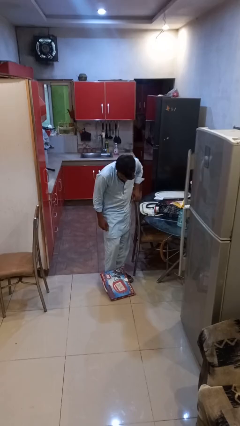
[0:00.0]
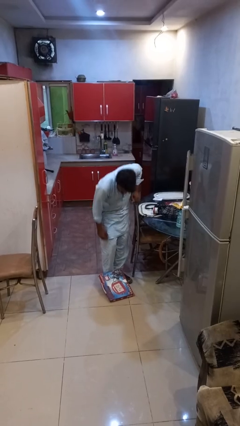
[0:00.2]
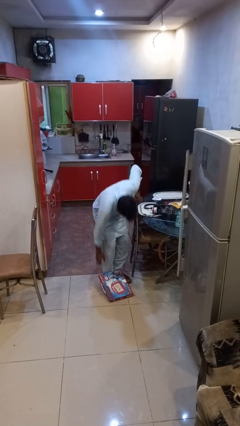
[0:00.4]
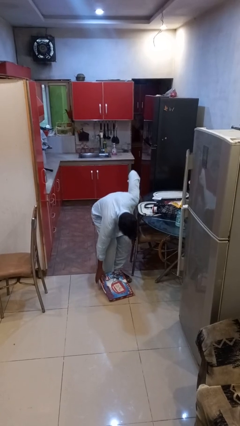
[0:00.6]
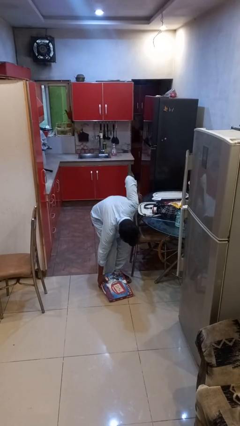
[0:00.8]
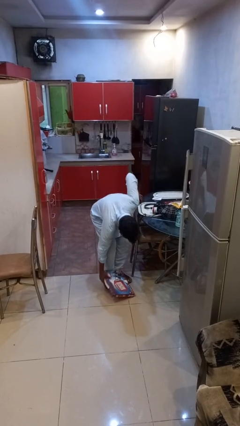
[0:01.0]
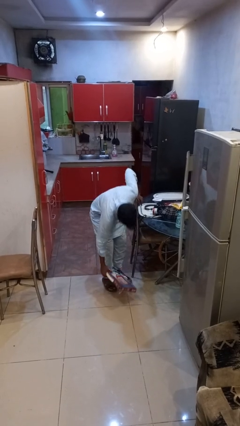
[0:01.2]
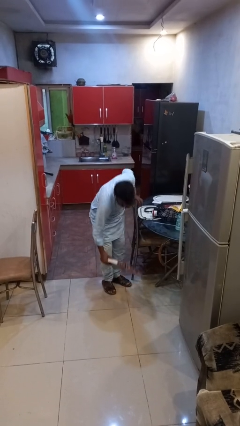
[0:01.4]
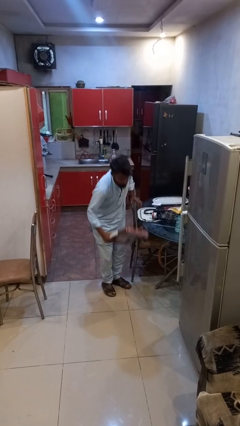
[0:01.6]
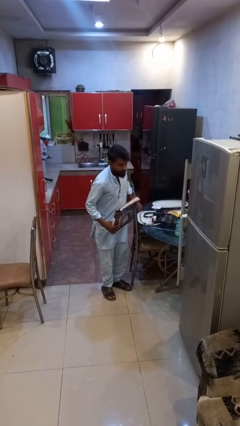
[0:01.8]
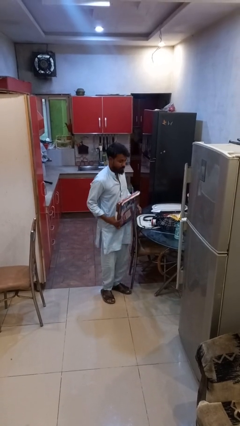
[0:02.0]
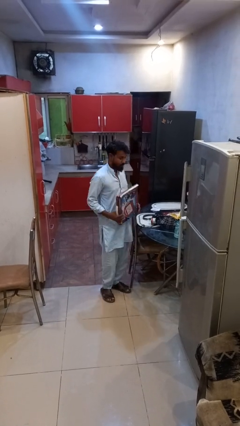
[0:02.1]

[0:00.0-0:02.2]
person picks up object from floor

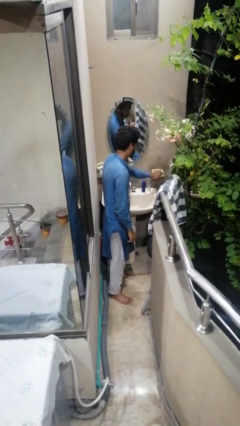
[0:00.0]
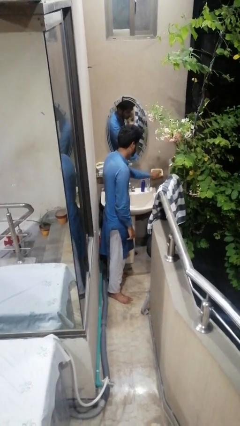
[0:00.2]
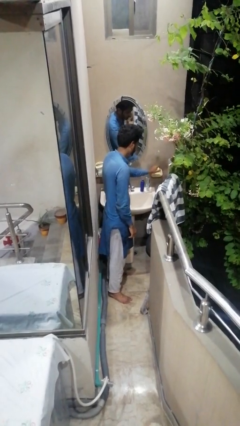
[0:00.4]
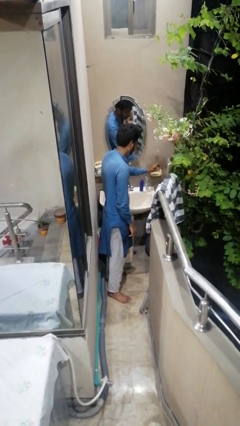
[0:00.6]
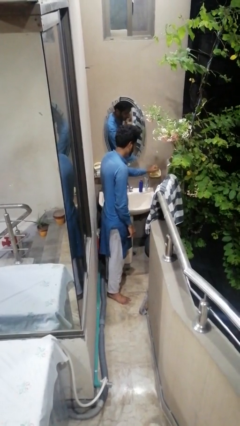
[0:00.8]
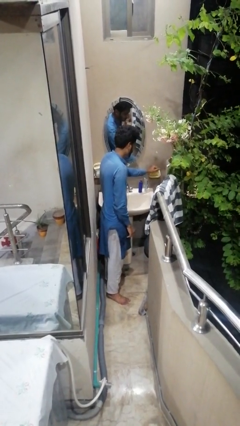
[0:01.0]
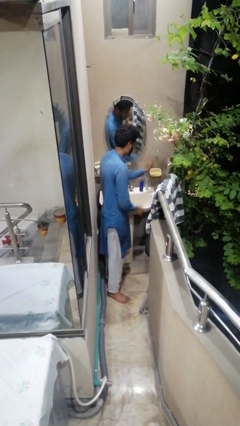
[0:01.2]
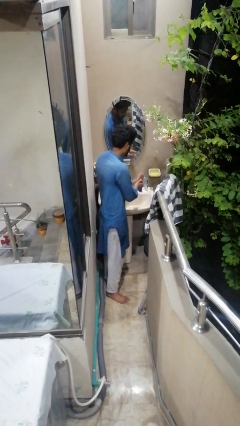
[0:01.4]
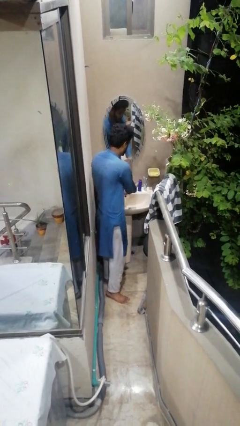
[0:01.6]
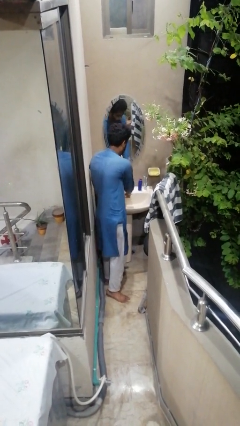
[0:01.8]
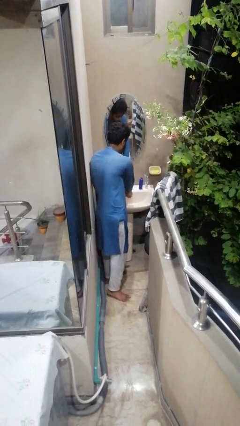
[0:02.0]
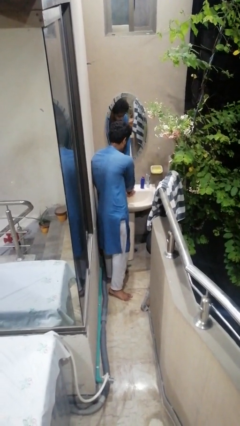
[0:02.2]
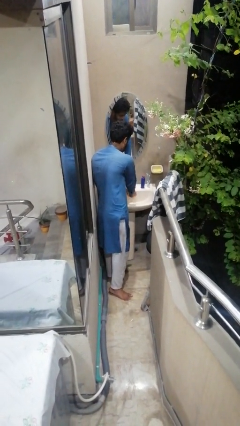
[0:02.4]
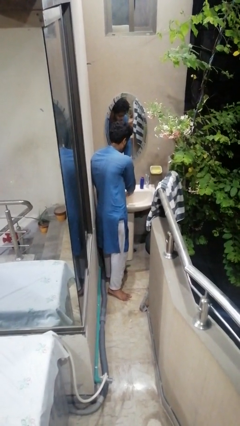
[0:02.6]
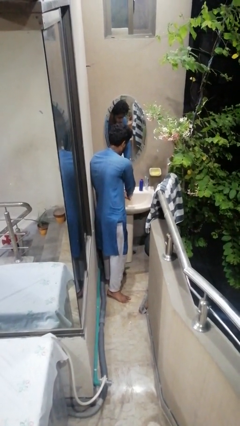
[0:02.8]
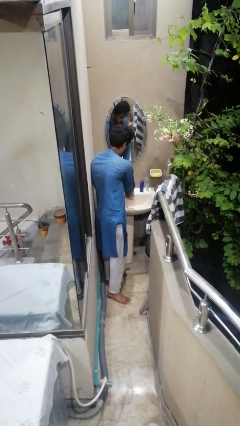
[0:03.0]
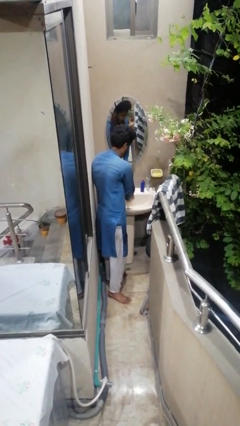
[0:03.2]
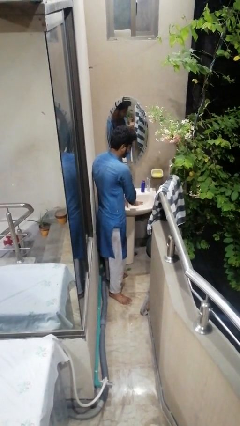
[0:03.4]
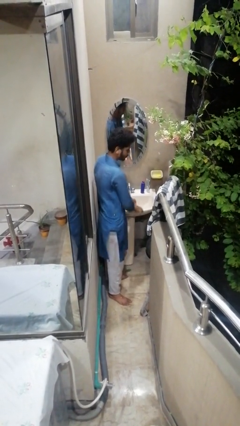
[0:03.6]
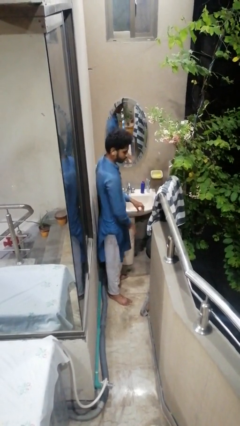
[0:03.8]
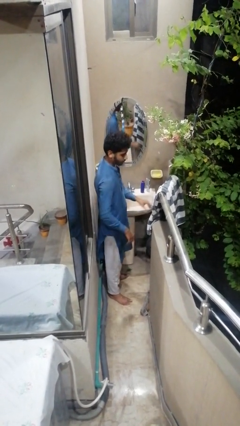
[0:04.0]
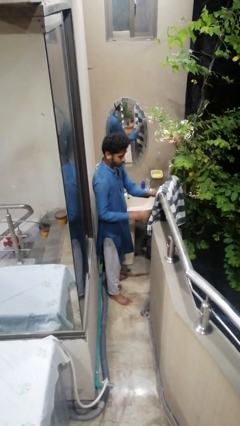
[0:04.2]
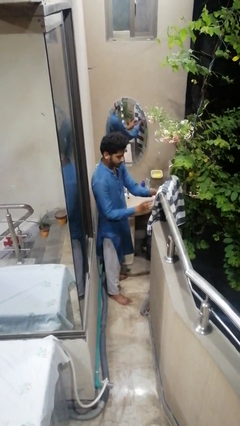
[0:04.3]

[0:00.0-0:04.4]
person washes hands

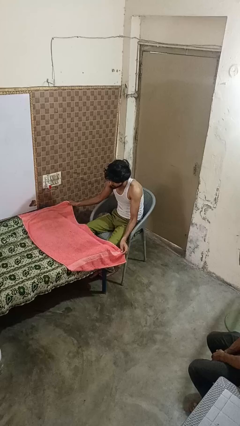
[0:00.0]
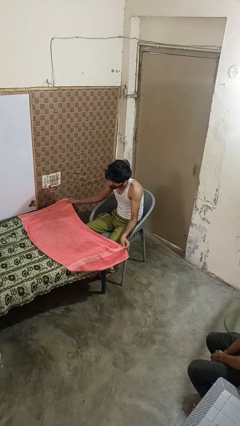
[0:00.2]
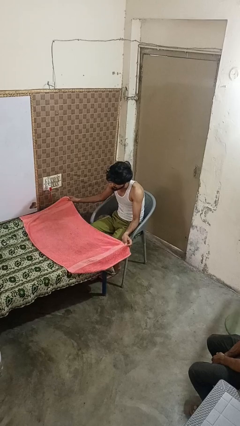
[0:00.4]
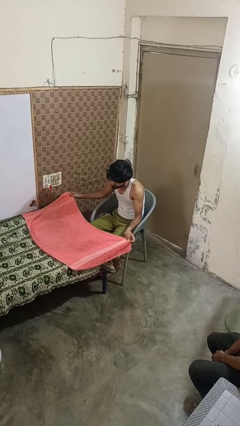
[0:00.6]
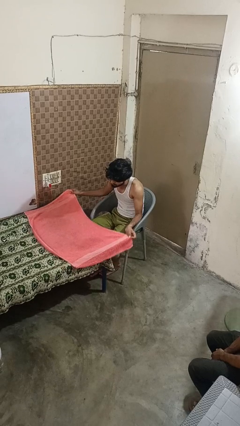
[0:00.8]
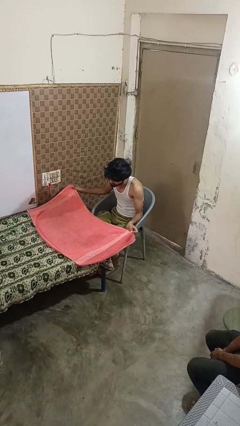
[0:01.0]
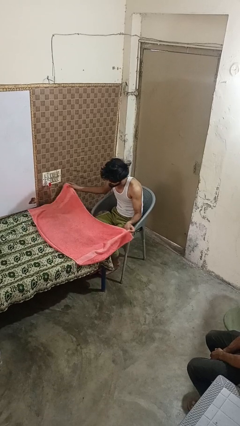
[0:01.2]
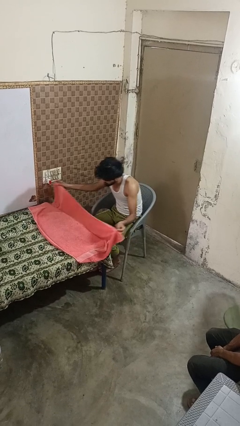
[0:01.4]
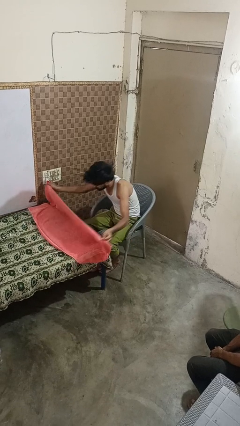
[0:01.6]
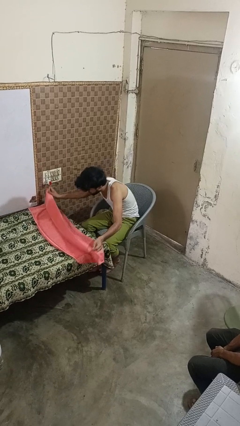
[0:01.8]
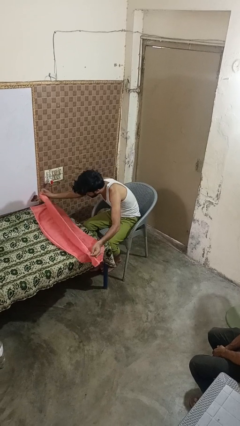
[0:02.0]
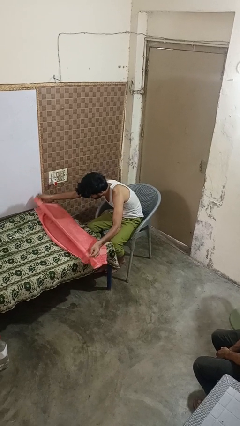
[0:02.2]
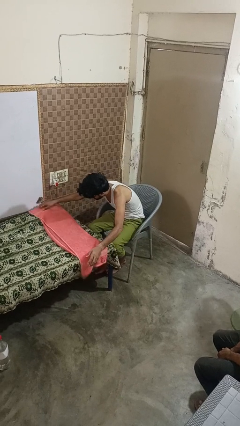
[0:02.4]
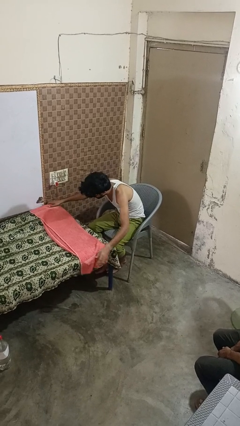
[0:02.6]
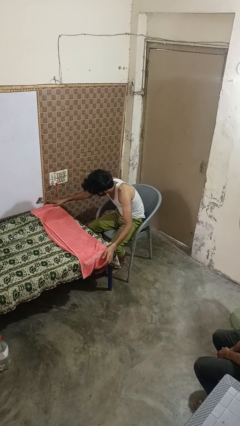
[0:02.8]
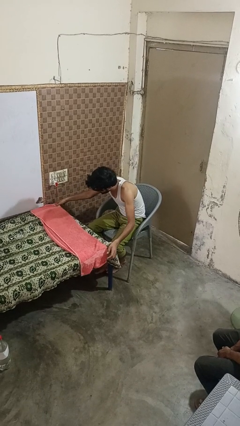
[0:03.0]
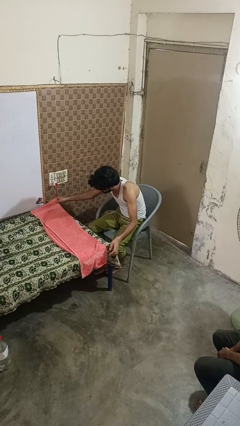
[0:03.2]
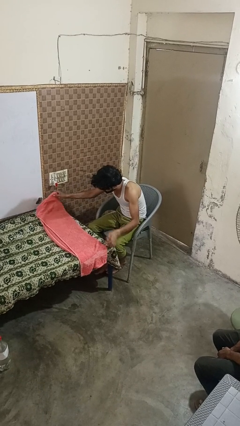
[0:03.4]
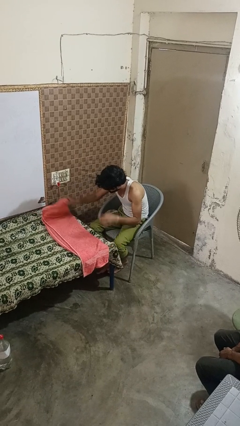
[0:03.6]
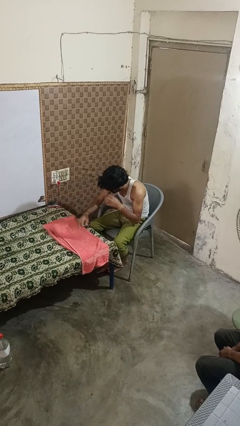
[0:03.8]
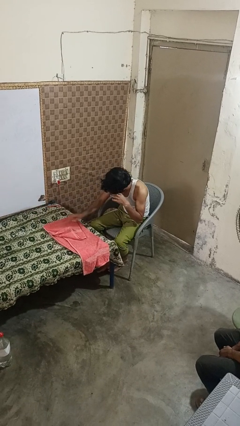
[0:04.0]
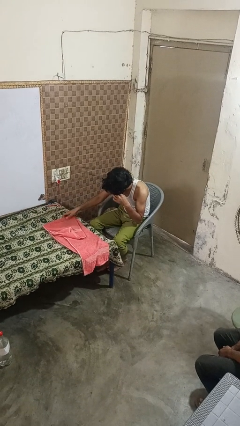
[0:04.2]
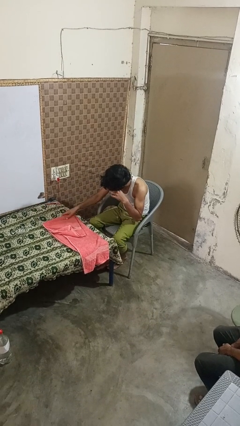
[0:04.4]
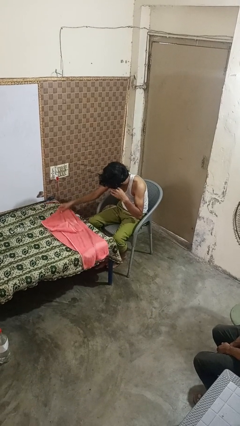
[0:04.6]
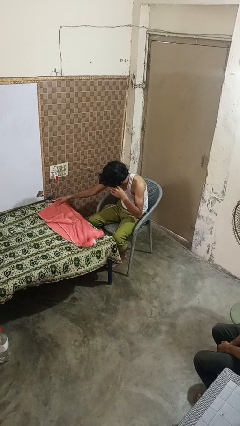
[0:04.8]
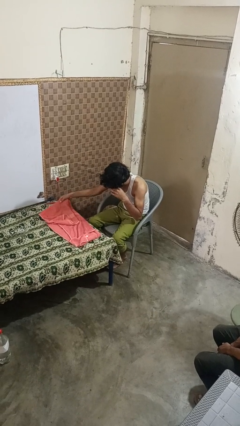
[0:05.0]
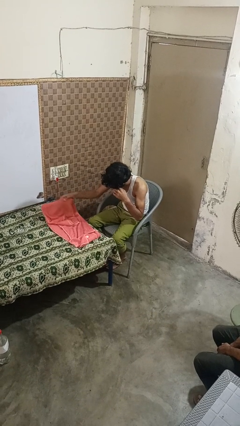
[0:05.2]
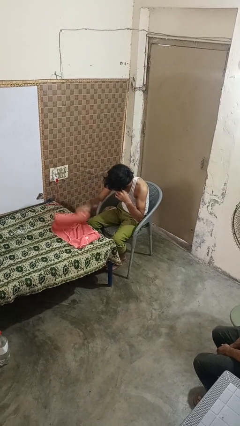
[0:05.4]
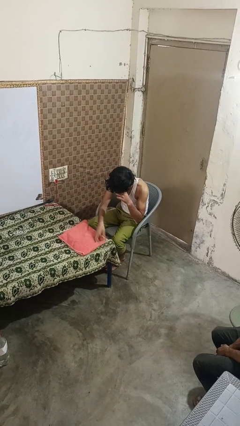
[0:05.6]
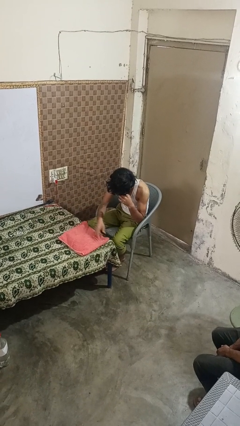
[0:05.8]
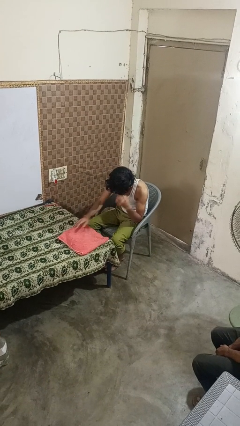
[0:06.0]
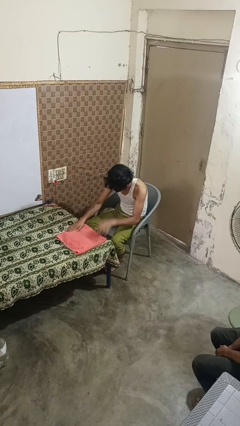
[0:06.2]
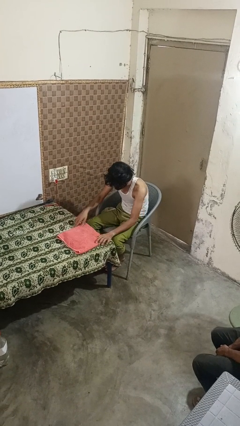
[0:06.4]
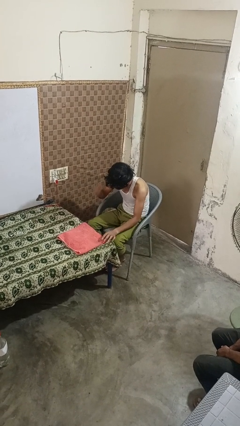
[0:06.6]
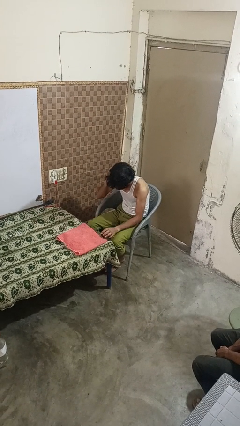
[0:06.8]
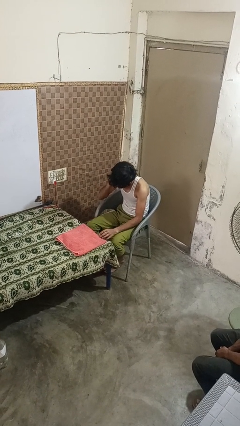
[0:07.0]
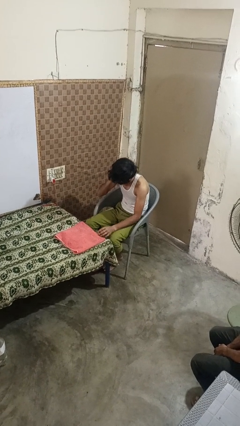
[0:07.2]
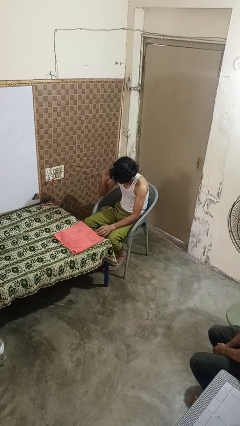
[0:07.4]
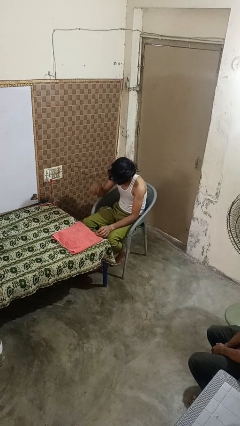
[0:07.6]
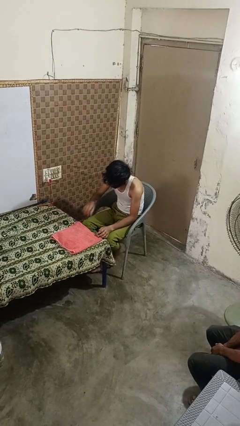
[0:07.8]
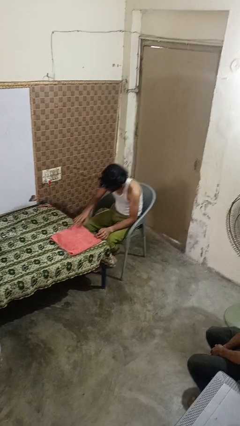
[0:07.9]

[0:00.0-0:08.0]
person folds towel

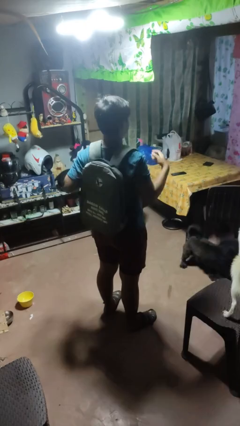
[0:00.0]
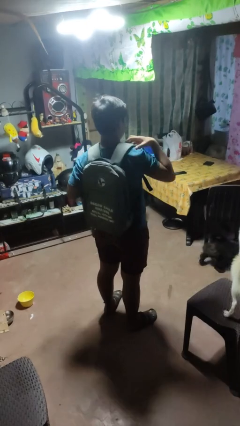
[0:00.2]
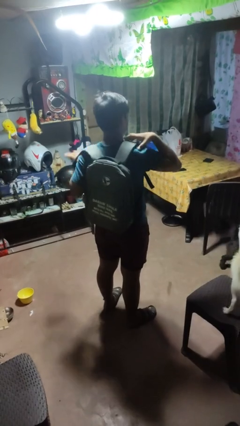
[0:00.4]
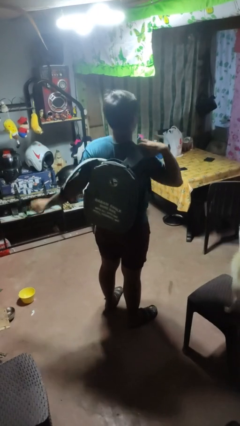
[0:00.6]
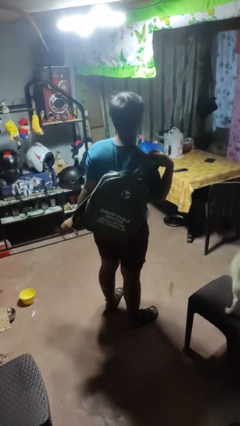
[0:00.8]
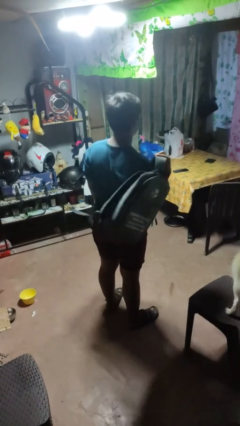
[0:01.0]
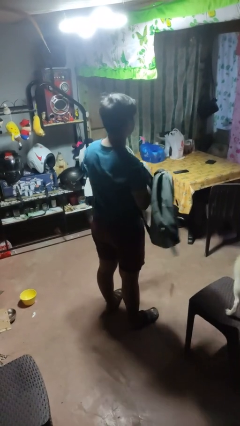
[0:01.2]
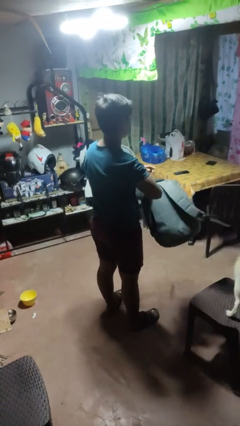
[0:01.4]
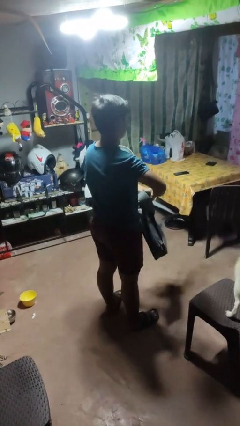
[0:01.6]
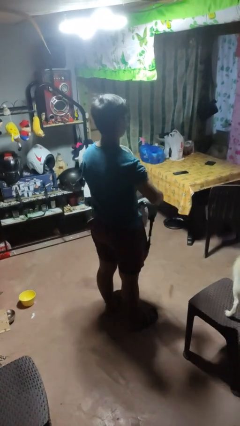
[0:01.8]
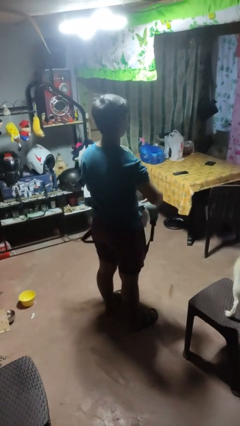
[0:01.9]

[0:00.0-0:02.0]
person takes off backpack

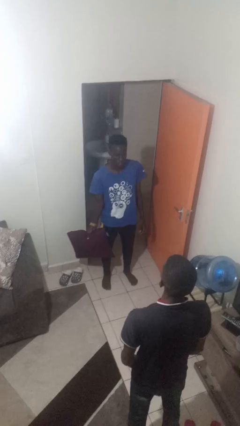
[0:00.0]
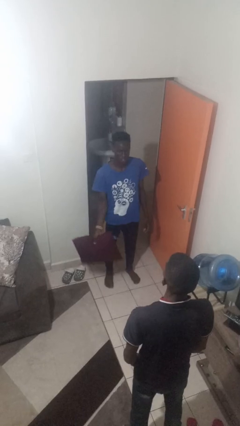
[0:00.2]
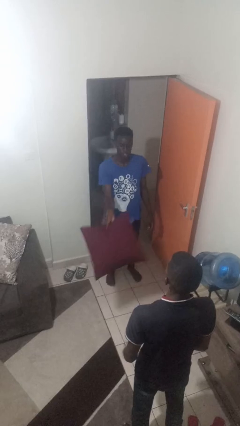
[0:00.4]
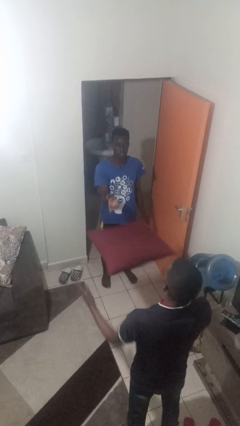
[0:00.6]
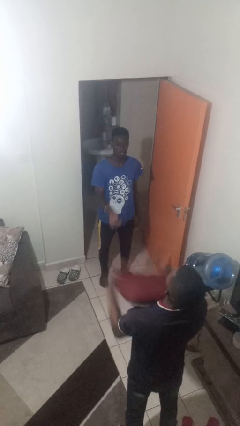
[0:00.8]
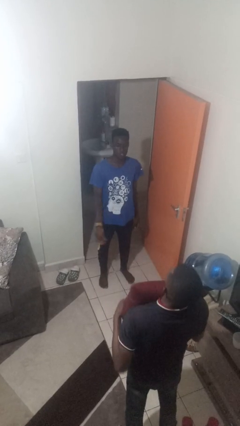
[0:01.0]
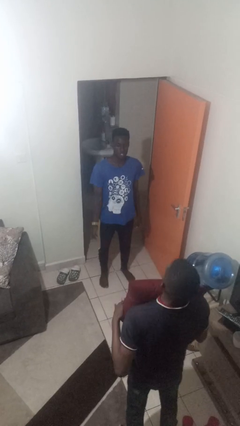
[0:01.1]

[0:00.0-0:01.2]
person throws object to person
